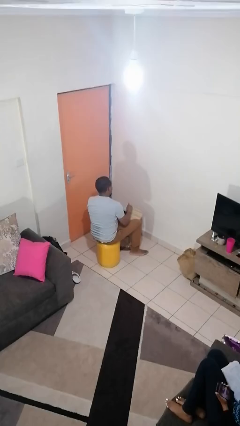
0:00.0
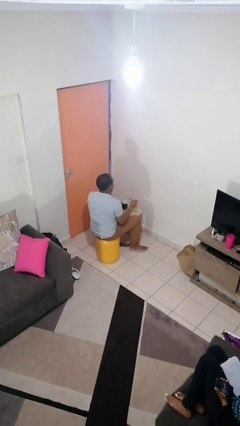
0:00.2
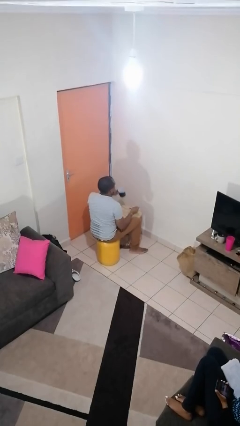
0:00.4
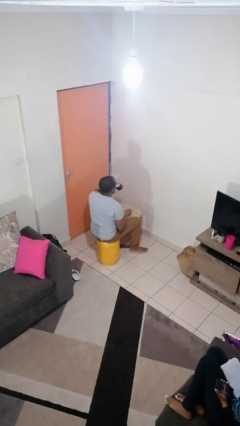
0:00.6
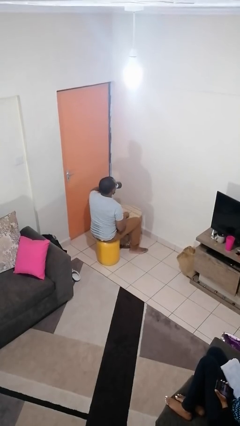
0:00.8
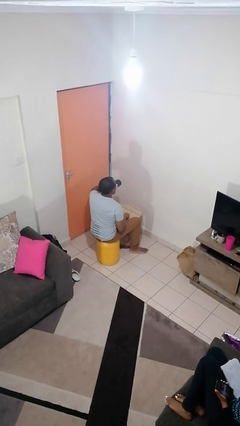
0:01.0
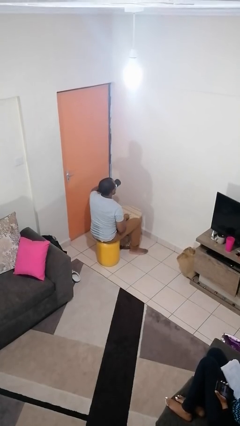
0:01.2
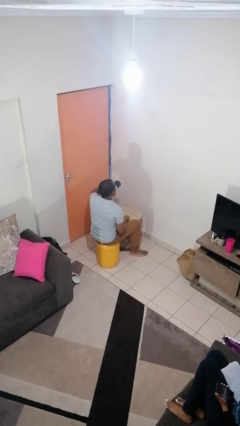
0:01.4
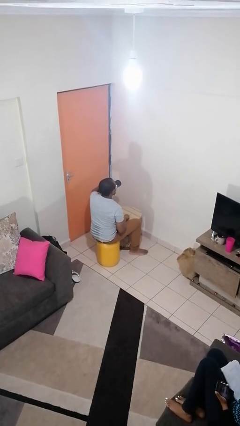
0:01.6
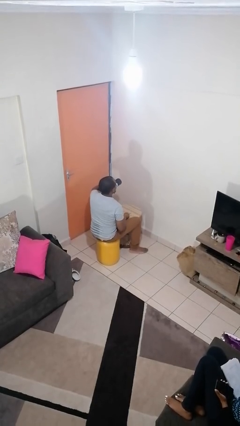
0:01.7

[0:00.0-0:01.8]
person drinks from mug

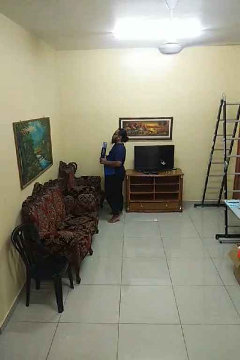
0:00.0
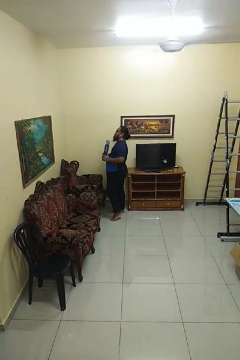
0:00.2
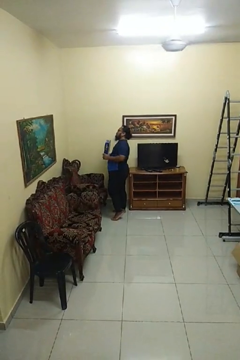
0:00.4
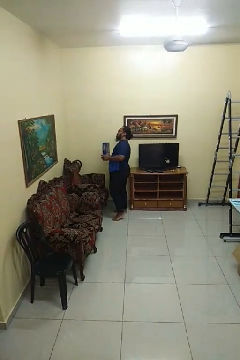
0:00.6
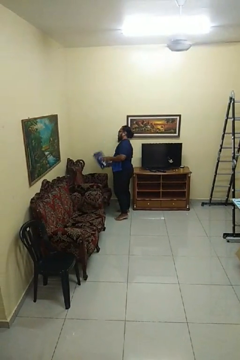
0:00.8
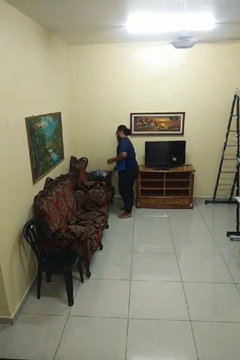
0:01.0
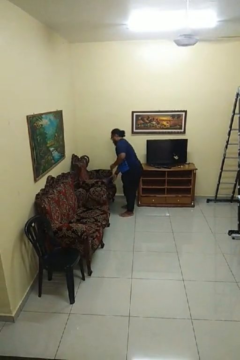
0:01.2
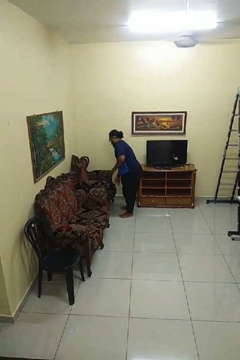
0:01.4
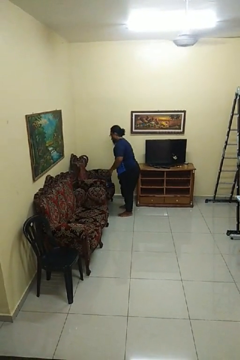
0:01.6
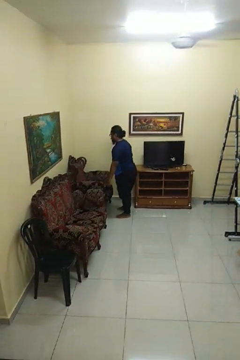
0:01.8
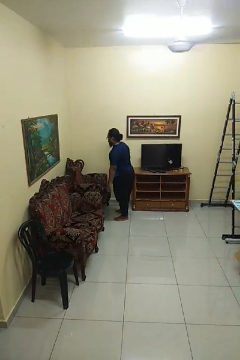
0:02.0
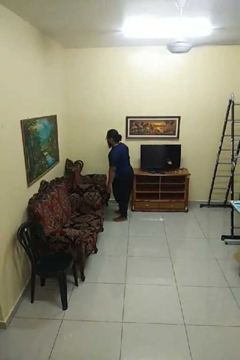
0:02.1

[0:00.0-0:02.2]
person puts down object on couch

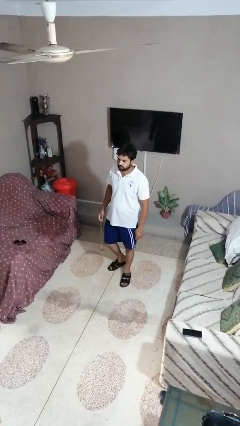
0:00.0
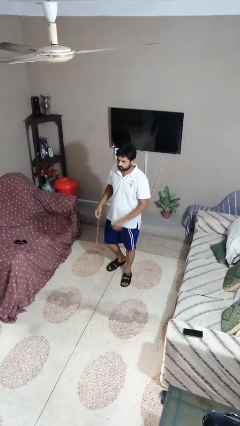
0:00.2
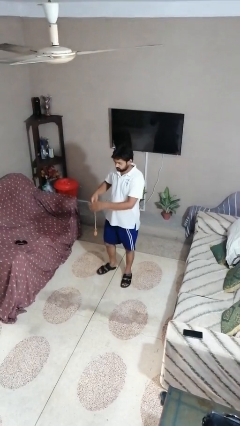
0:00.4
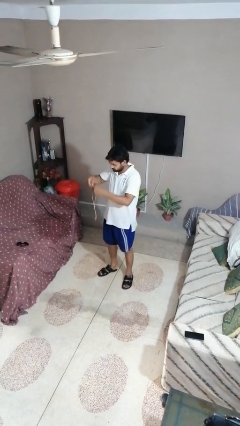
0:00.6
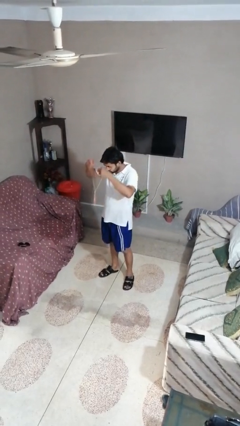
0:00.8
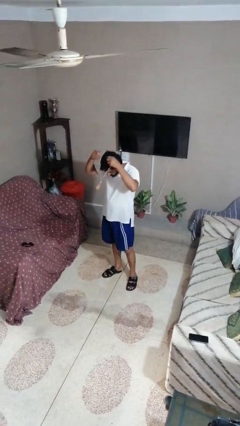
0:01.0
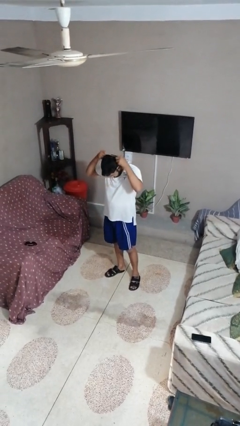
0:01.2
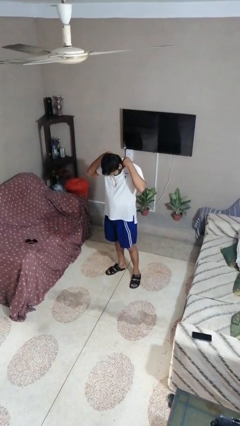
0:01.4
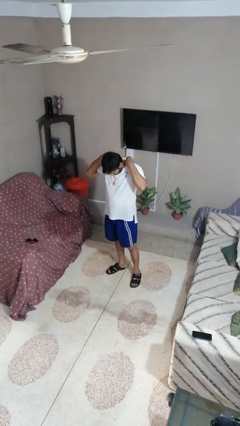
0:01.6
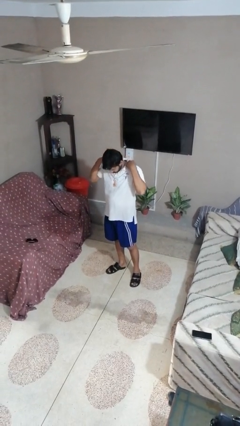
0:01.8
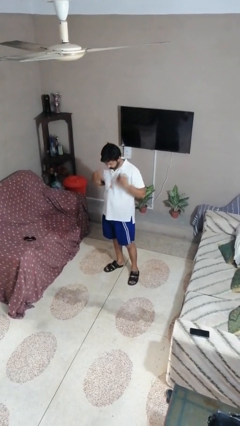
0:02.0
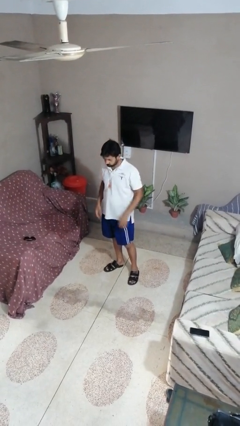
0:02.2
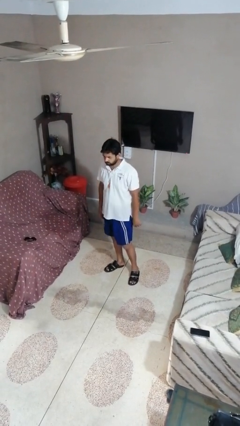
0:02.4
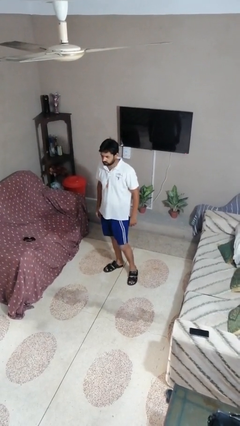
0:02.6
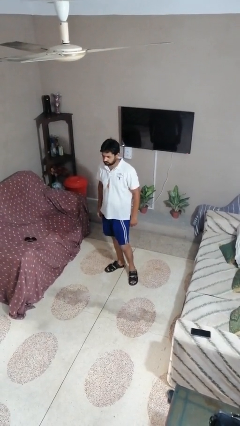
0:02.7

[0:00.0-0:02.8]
person puts on necklace

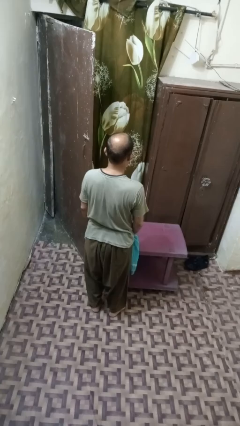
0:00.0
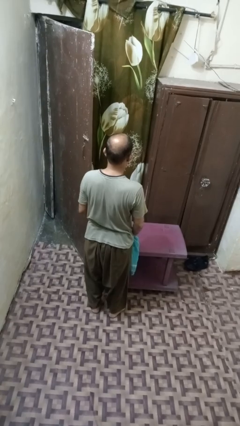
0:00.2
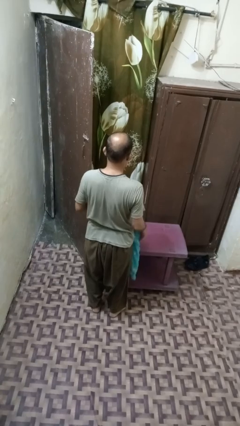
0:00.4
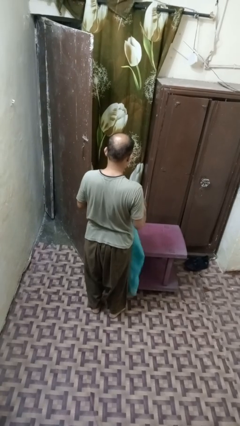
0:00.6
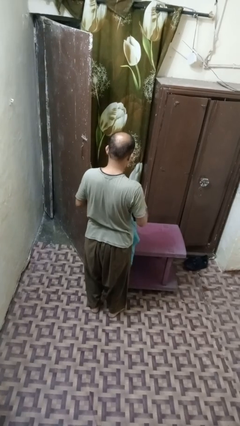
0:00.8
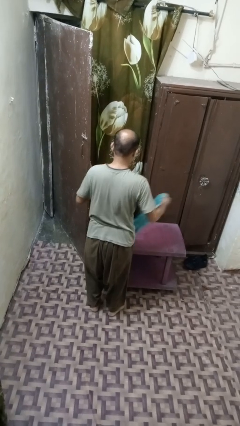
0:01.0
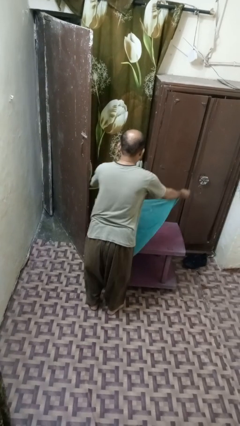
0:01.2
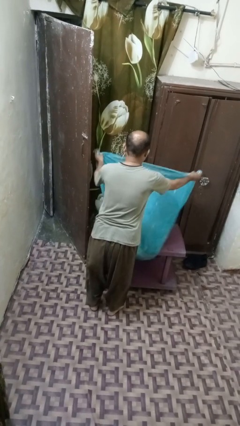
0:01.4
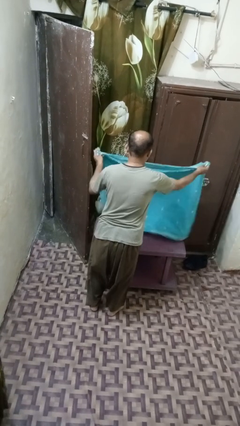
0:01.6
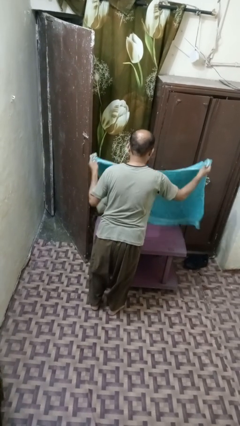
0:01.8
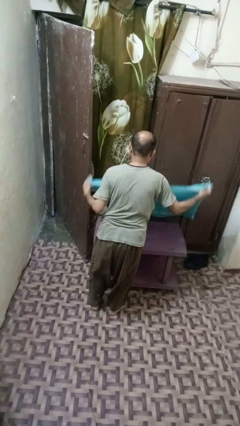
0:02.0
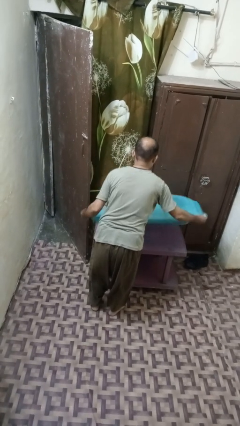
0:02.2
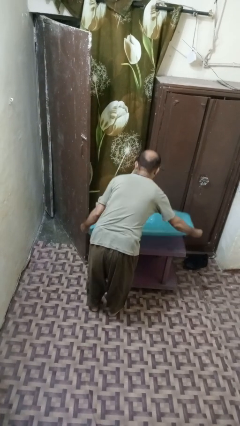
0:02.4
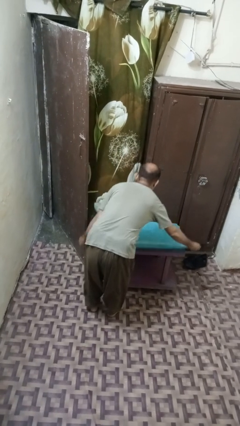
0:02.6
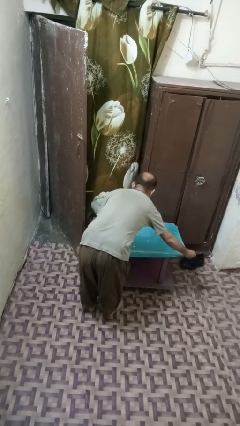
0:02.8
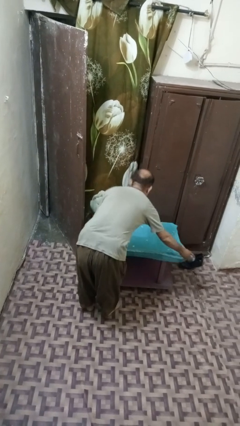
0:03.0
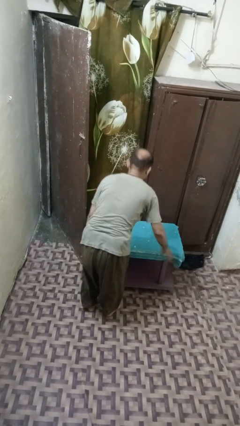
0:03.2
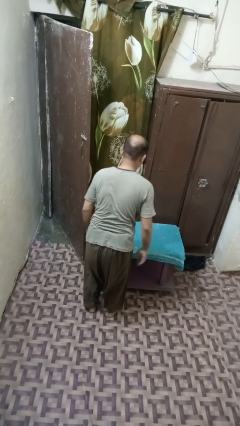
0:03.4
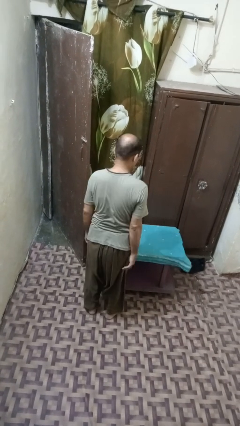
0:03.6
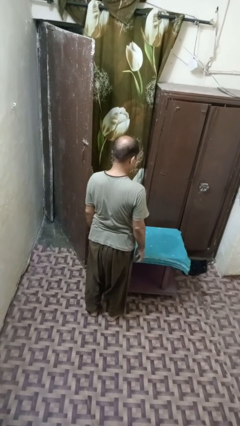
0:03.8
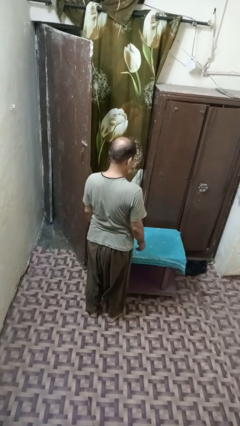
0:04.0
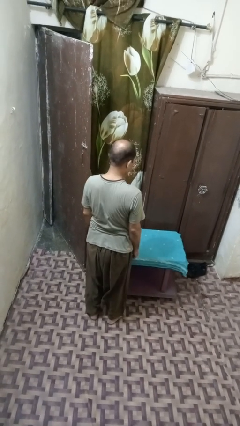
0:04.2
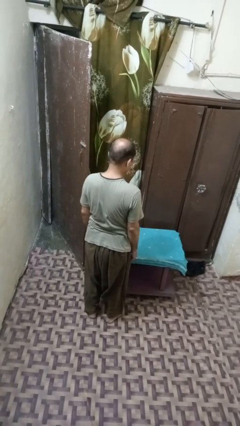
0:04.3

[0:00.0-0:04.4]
person spreads tablecloth

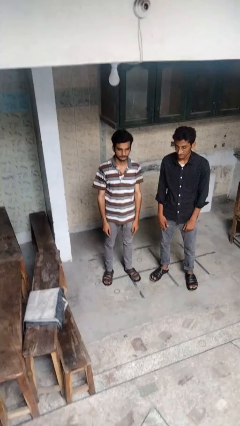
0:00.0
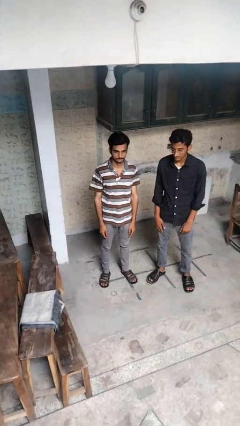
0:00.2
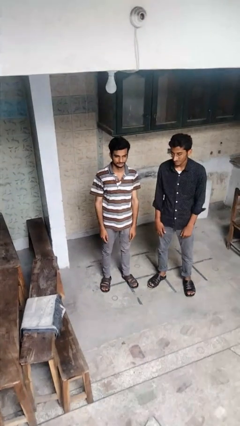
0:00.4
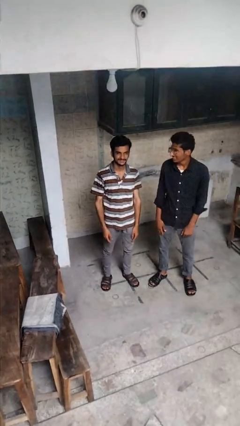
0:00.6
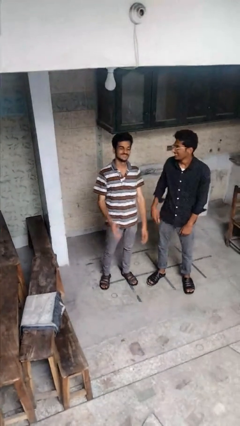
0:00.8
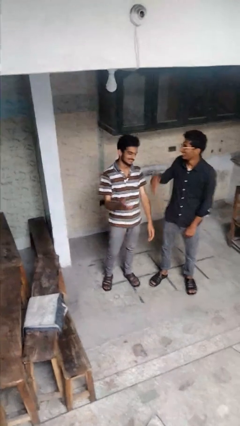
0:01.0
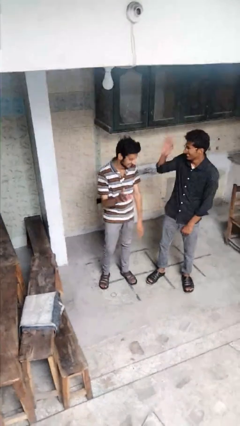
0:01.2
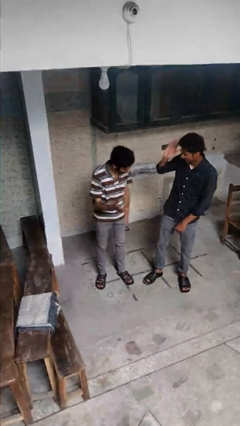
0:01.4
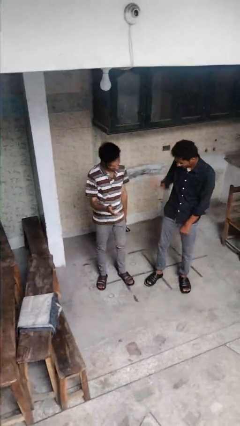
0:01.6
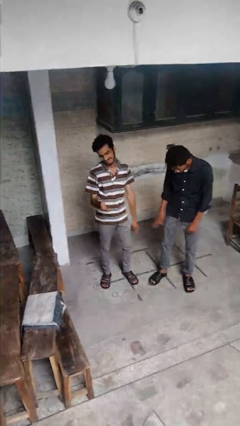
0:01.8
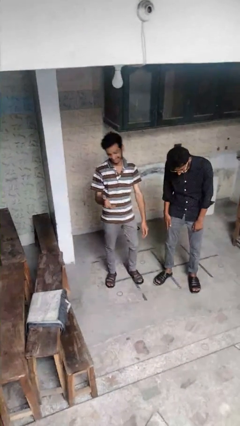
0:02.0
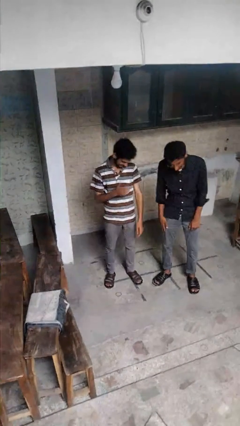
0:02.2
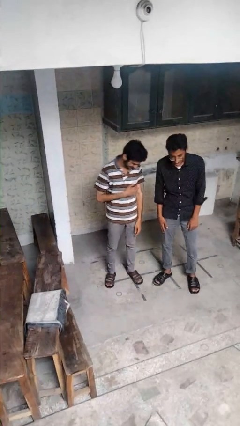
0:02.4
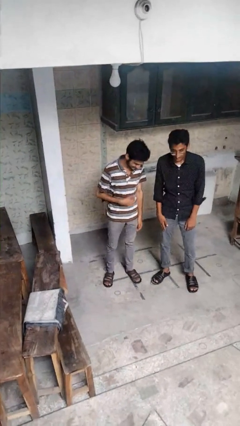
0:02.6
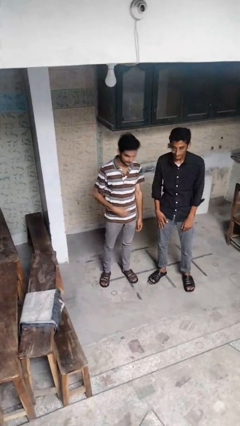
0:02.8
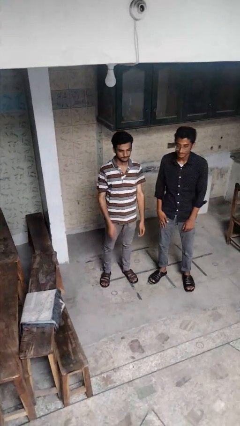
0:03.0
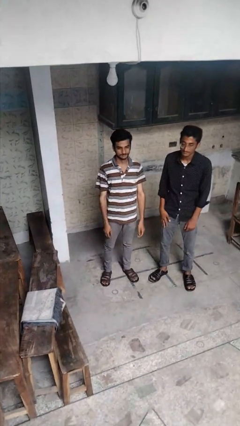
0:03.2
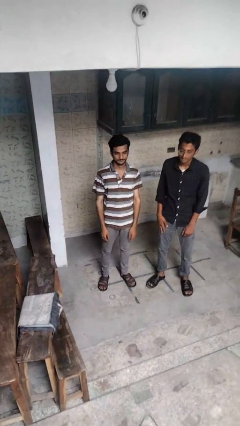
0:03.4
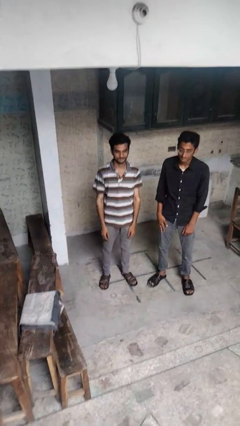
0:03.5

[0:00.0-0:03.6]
person laughs with person

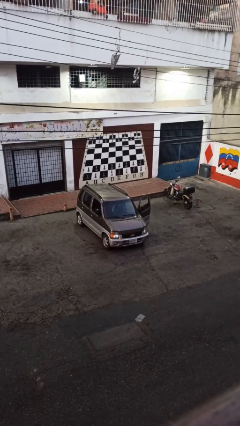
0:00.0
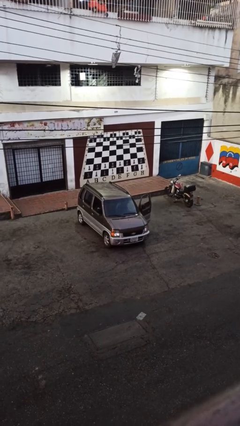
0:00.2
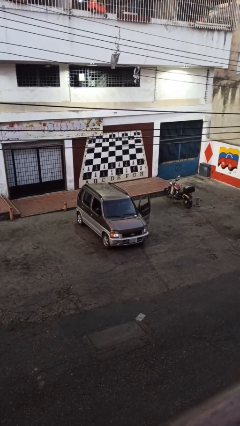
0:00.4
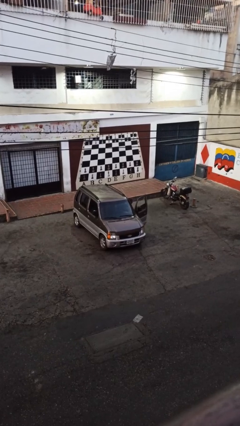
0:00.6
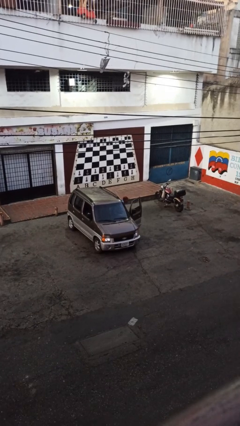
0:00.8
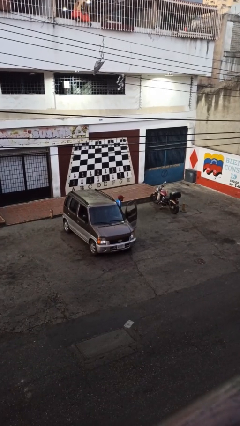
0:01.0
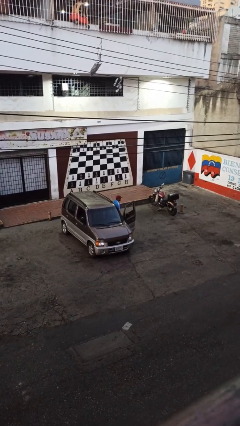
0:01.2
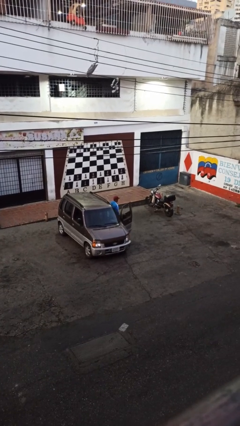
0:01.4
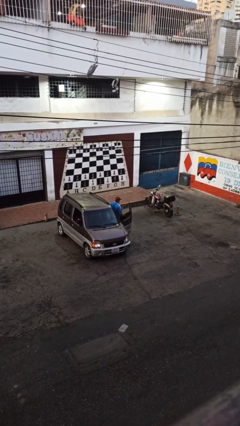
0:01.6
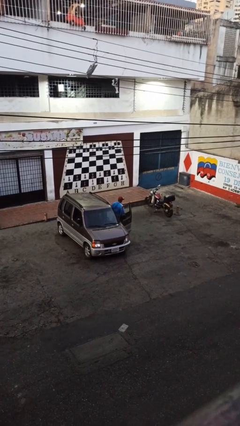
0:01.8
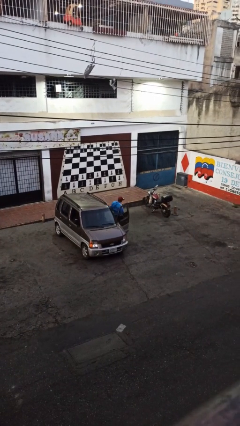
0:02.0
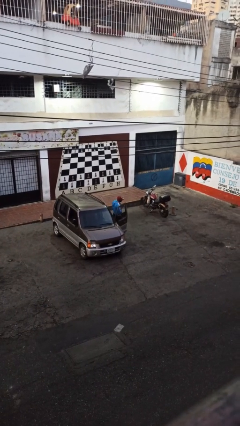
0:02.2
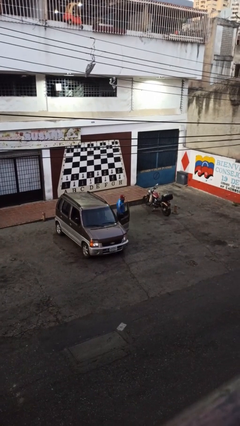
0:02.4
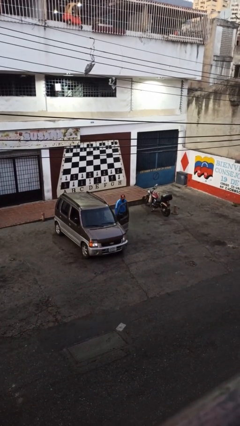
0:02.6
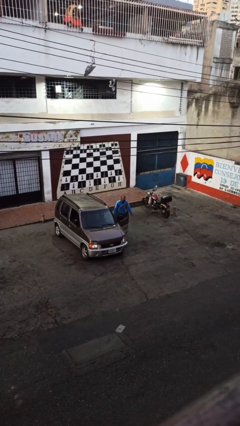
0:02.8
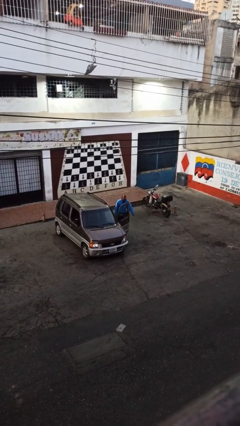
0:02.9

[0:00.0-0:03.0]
person exits car

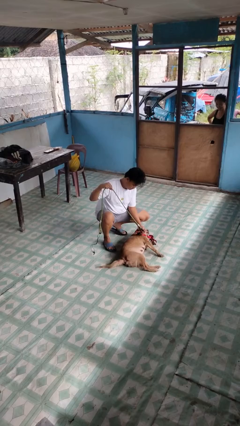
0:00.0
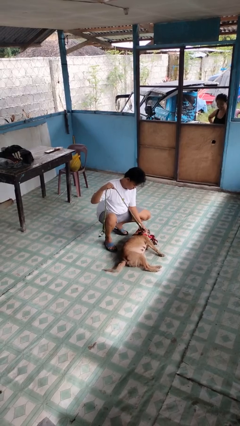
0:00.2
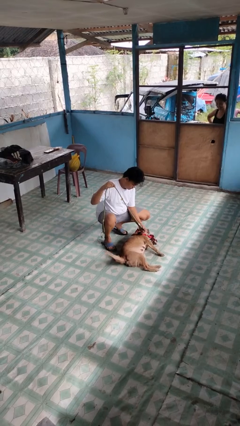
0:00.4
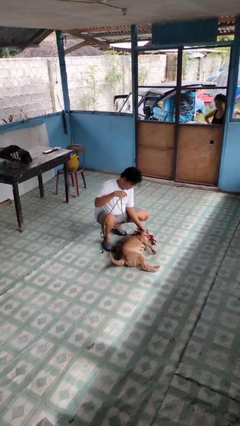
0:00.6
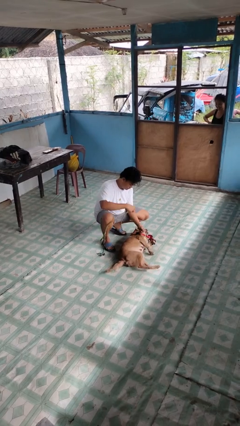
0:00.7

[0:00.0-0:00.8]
person unattaches leash from dog
